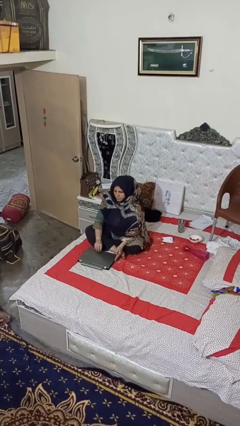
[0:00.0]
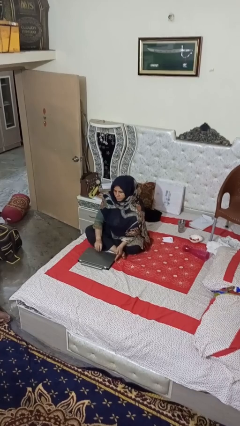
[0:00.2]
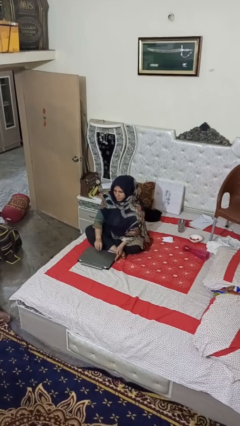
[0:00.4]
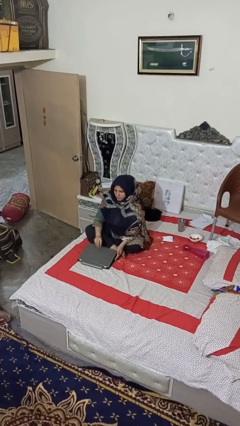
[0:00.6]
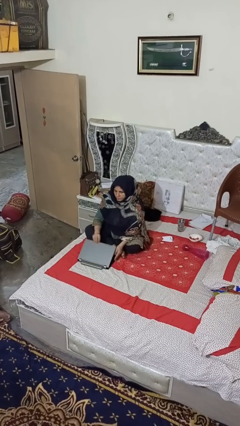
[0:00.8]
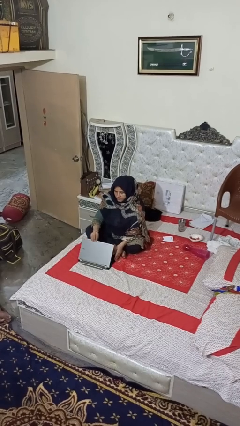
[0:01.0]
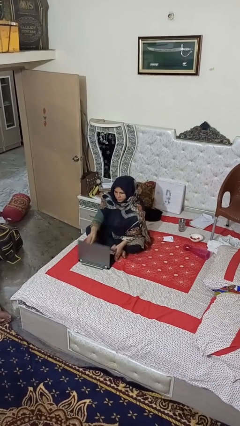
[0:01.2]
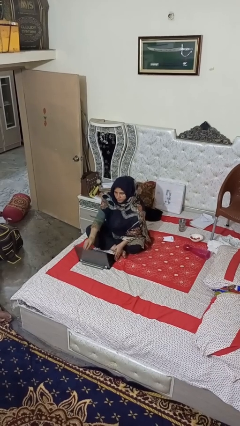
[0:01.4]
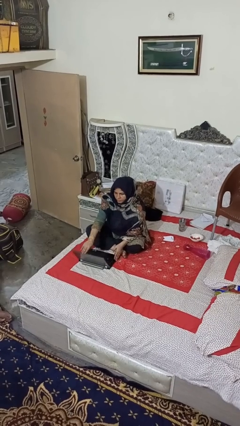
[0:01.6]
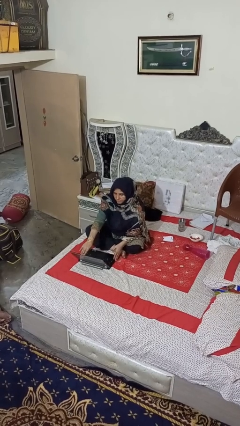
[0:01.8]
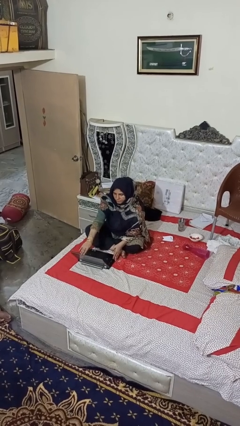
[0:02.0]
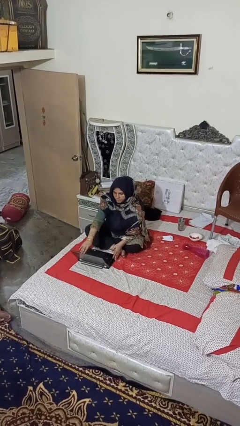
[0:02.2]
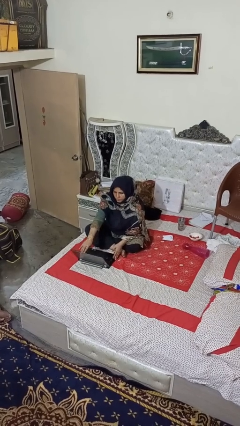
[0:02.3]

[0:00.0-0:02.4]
person opens laptop

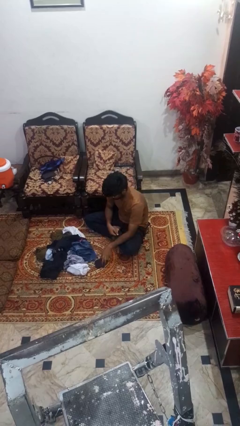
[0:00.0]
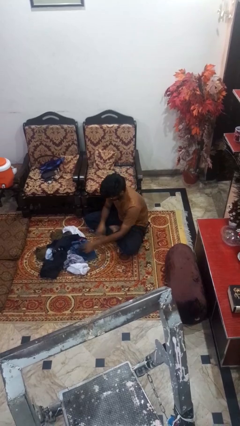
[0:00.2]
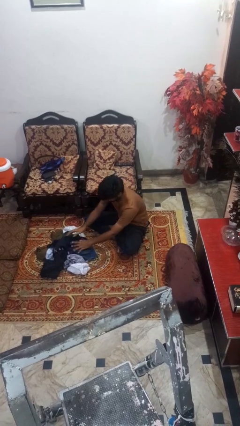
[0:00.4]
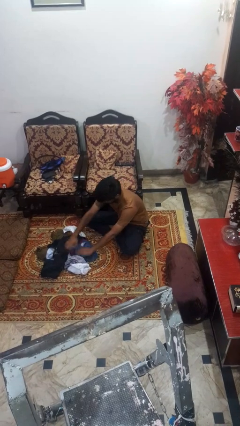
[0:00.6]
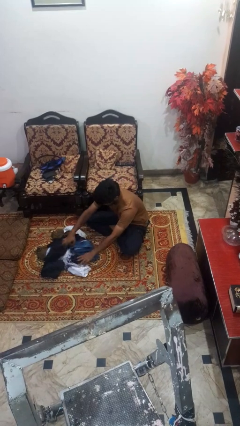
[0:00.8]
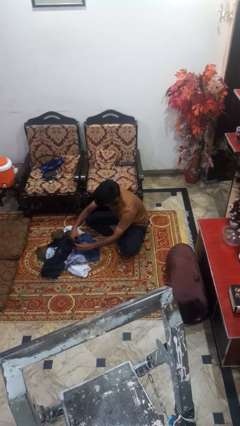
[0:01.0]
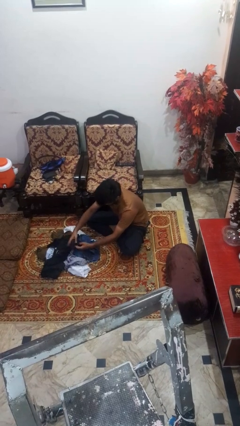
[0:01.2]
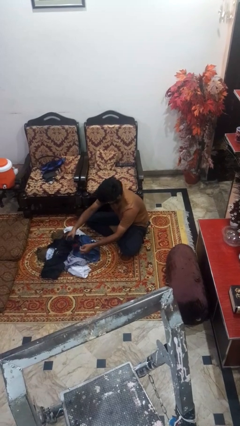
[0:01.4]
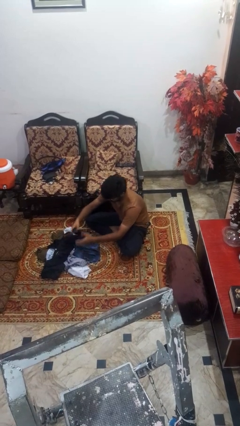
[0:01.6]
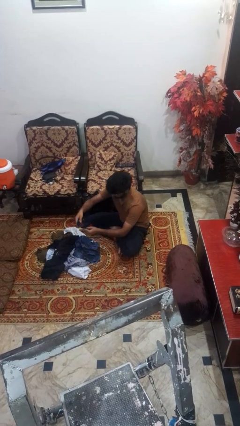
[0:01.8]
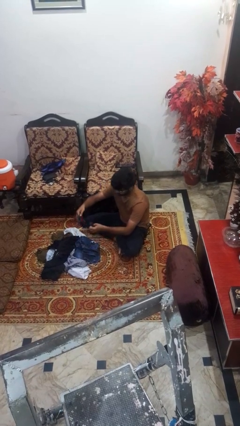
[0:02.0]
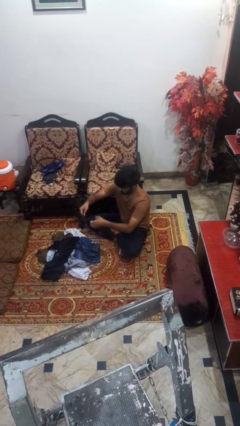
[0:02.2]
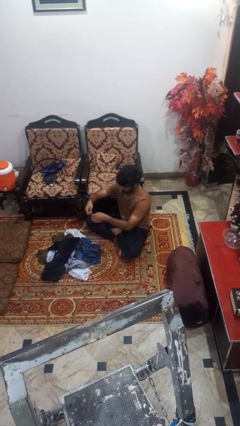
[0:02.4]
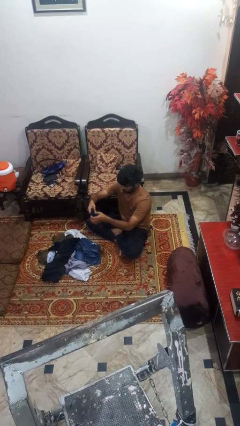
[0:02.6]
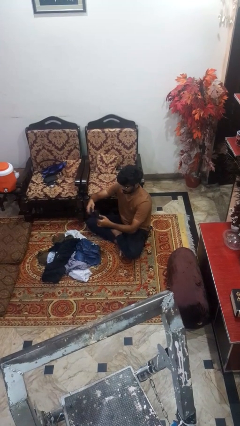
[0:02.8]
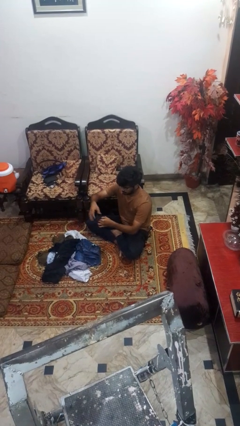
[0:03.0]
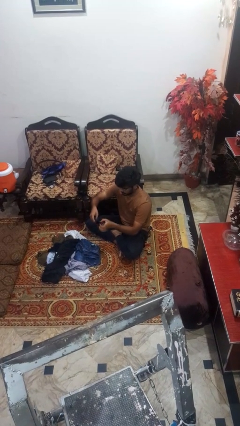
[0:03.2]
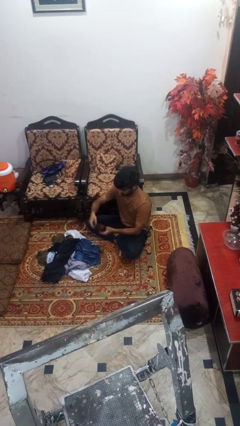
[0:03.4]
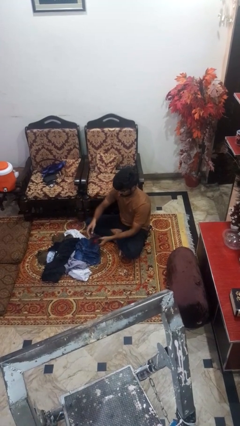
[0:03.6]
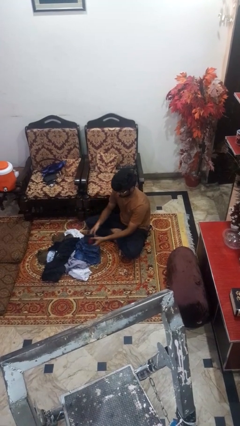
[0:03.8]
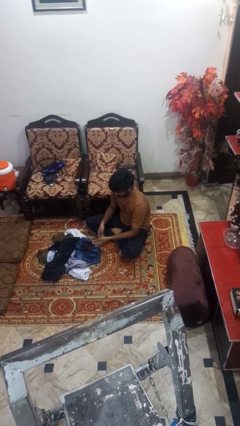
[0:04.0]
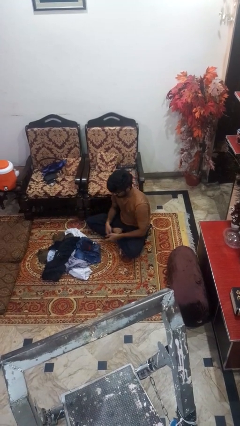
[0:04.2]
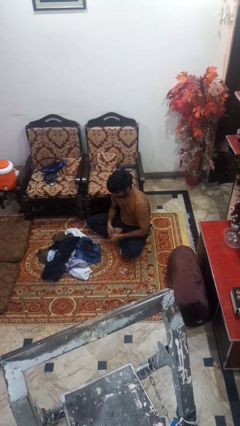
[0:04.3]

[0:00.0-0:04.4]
person folds socks

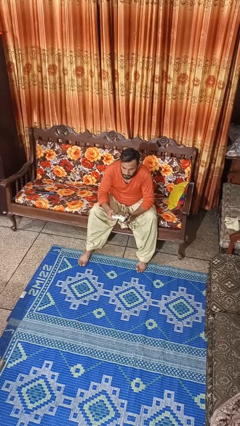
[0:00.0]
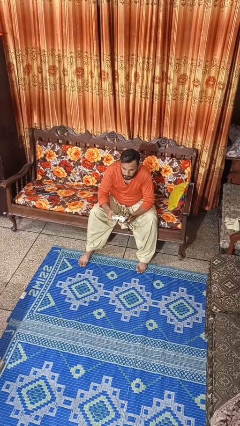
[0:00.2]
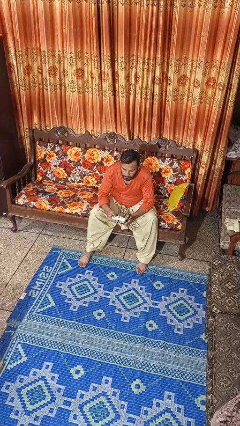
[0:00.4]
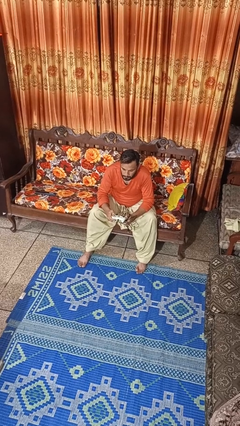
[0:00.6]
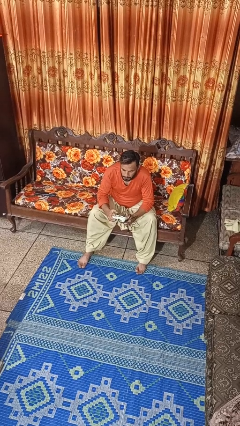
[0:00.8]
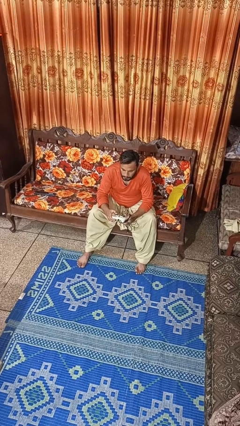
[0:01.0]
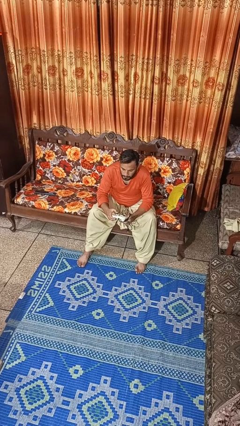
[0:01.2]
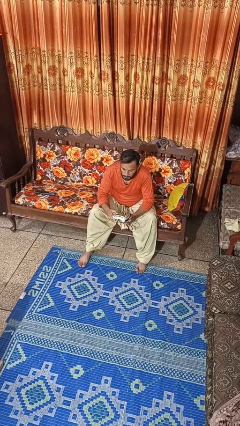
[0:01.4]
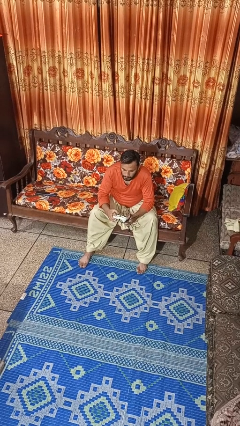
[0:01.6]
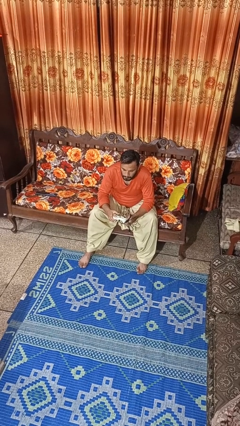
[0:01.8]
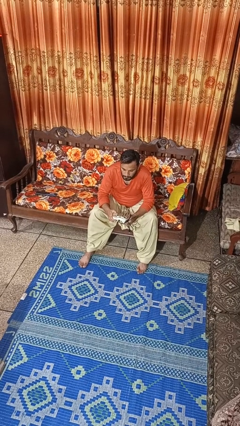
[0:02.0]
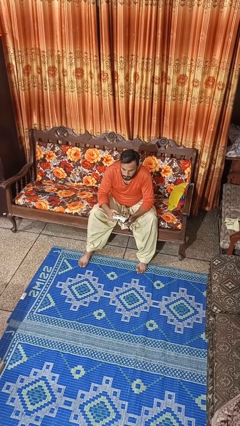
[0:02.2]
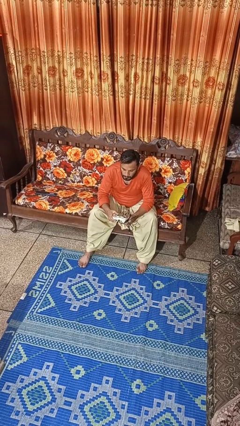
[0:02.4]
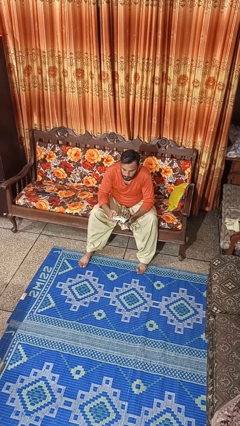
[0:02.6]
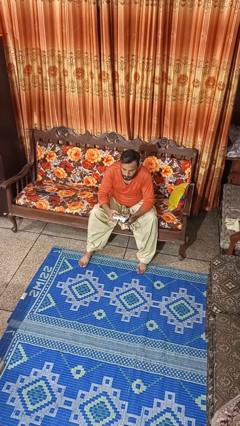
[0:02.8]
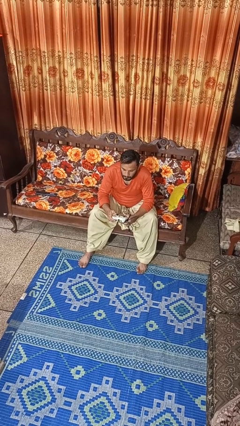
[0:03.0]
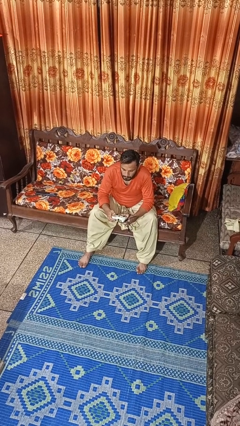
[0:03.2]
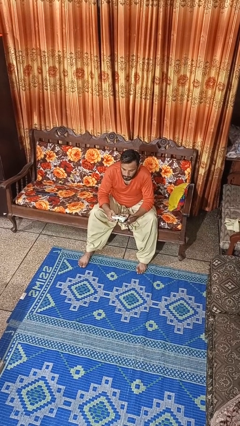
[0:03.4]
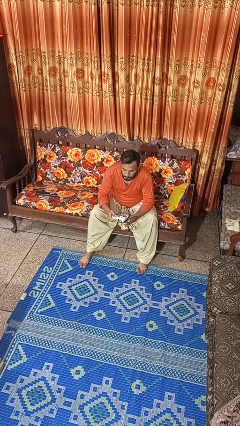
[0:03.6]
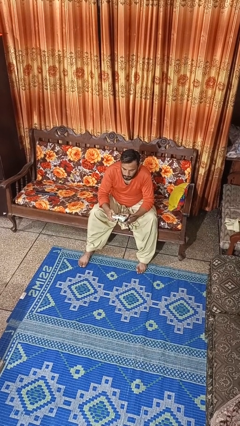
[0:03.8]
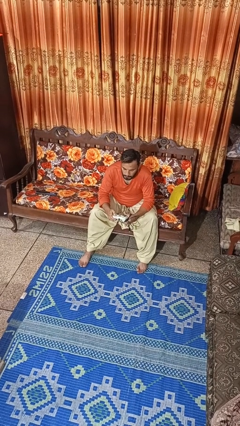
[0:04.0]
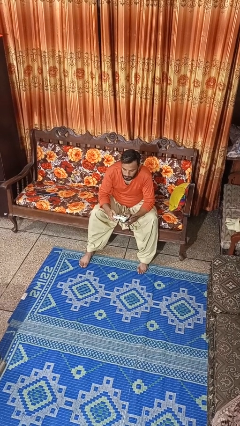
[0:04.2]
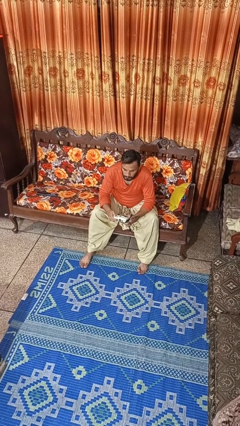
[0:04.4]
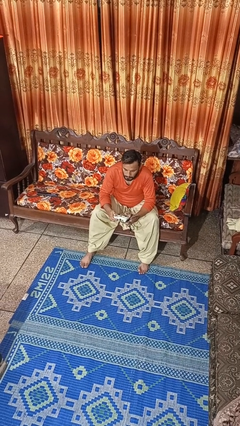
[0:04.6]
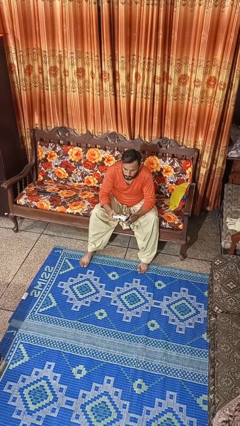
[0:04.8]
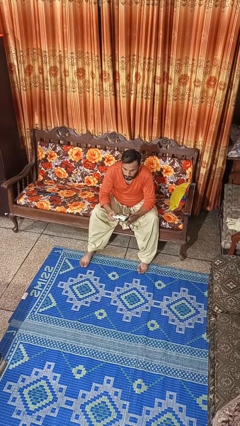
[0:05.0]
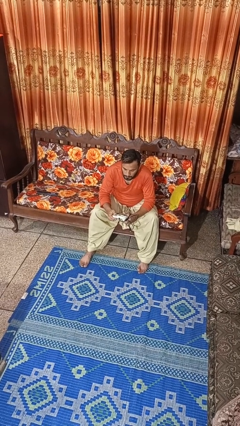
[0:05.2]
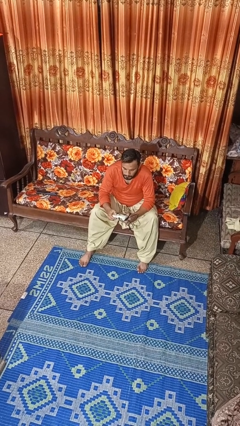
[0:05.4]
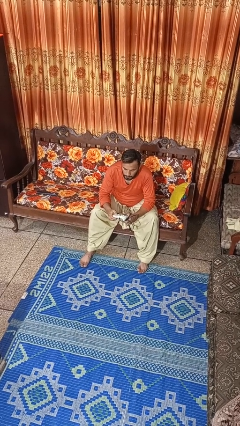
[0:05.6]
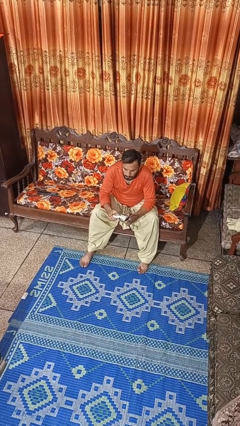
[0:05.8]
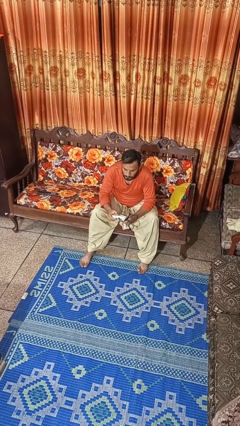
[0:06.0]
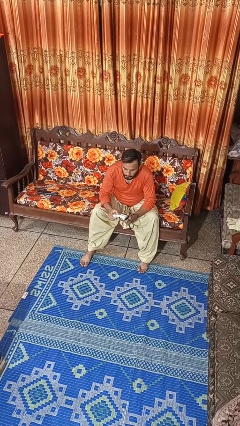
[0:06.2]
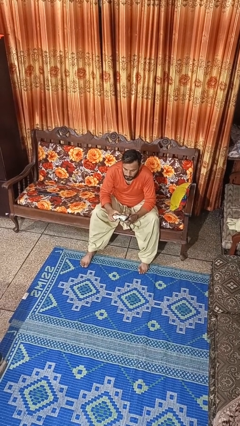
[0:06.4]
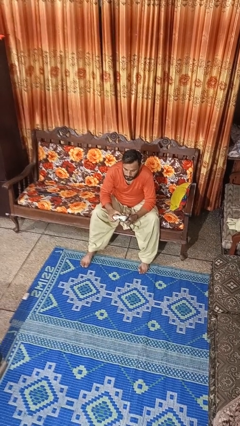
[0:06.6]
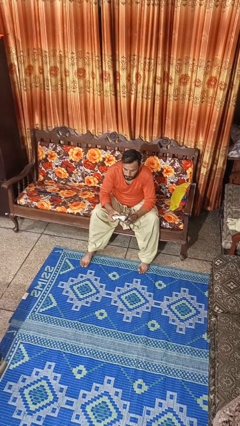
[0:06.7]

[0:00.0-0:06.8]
person interacts with handheld game

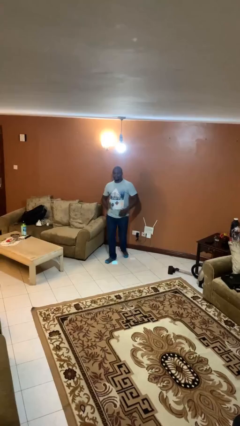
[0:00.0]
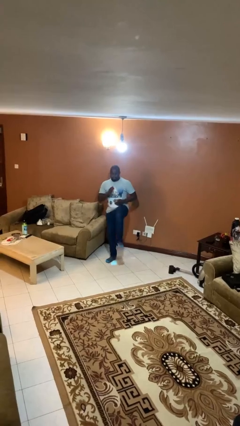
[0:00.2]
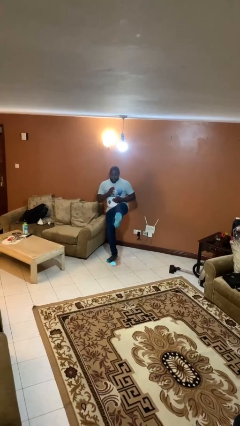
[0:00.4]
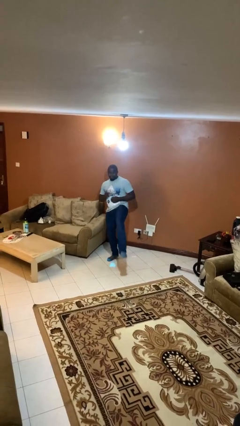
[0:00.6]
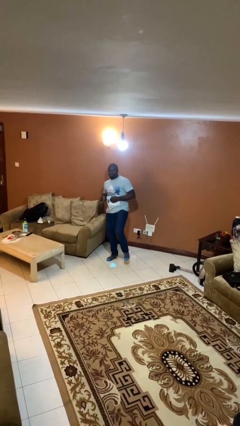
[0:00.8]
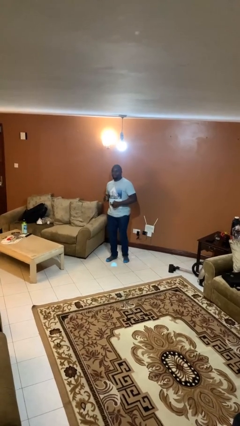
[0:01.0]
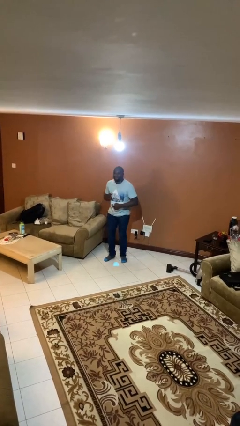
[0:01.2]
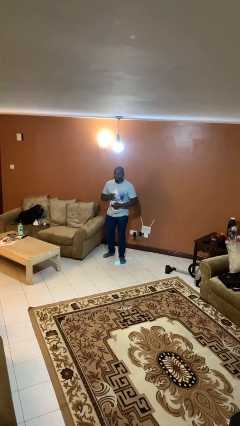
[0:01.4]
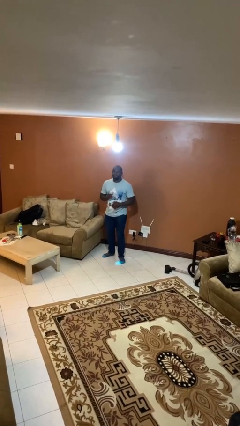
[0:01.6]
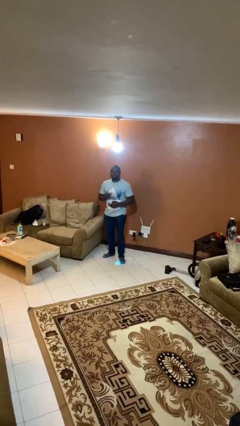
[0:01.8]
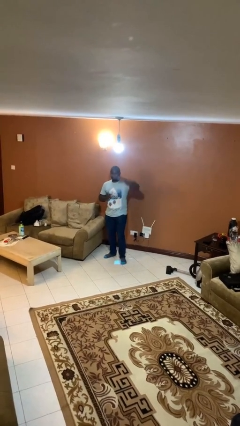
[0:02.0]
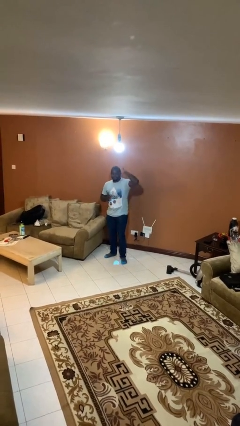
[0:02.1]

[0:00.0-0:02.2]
person karate kicks

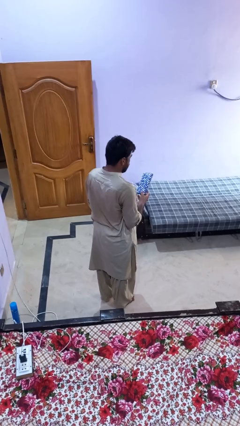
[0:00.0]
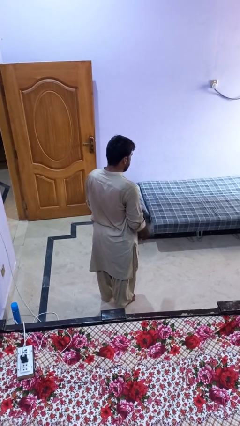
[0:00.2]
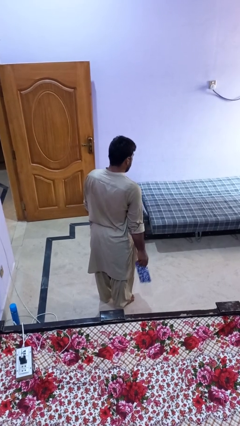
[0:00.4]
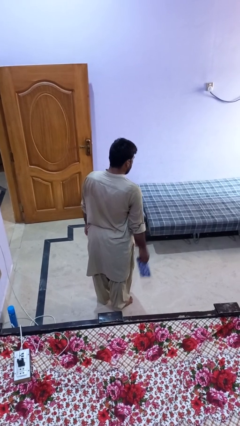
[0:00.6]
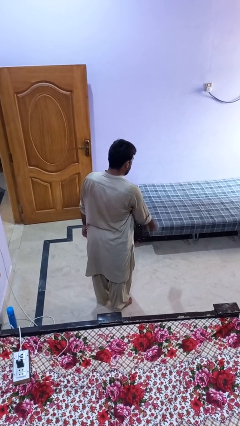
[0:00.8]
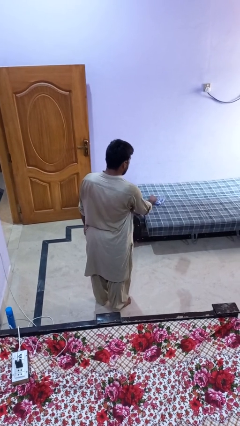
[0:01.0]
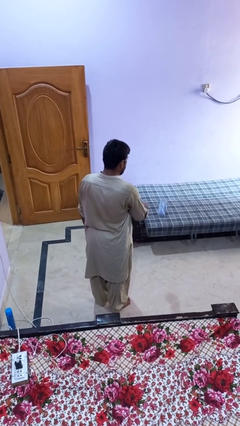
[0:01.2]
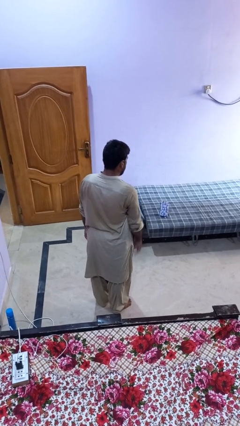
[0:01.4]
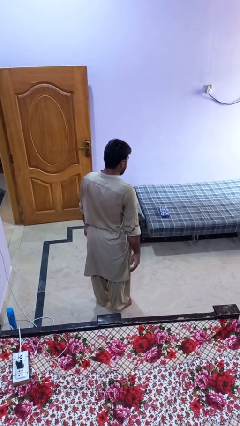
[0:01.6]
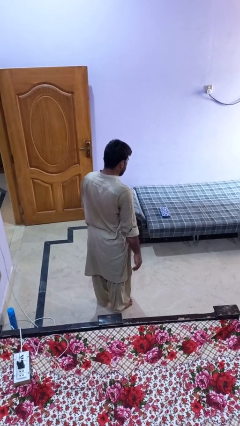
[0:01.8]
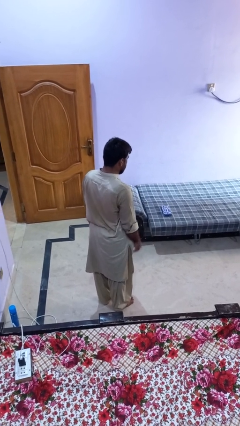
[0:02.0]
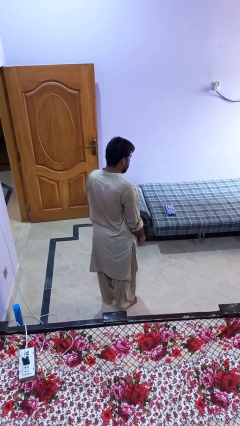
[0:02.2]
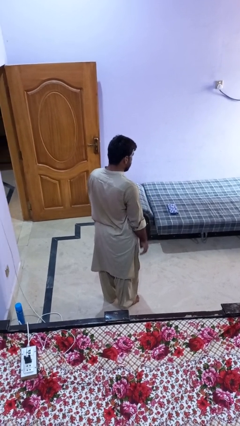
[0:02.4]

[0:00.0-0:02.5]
person throws object on bed
